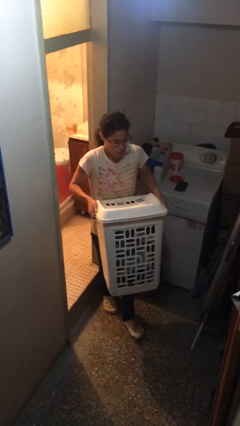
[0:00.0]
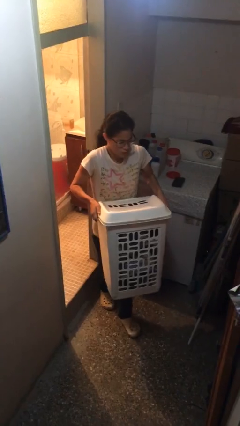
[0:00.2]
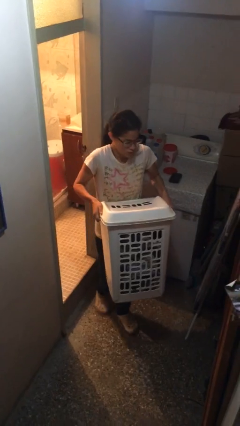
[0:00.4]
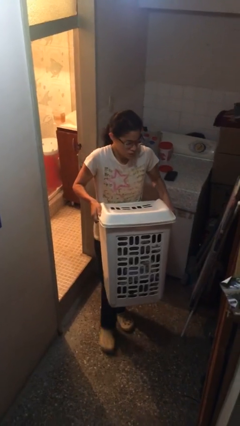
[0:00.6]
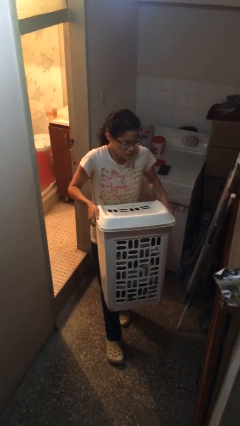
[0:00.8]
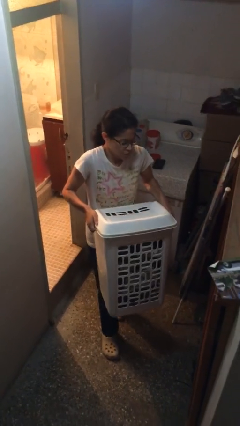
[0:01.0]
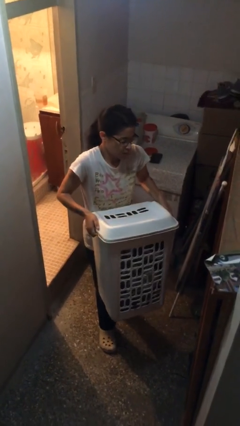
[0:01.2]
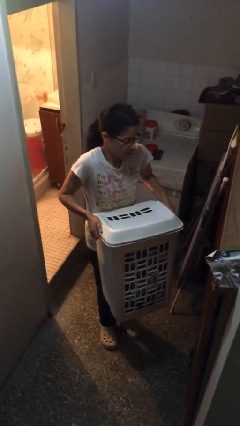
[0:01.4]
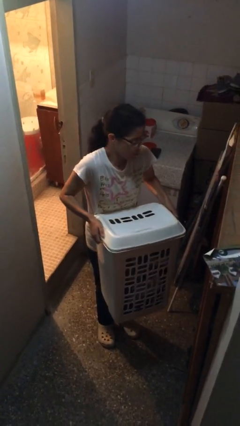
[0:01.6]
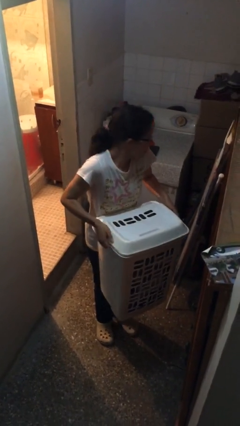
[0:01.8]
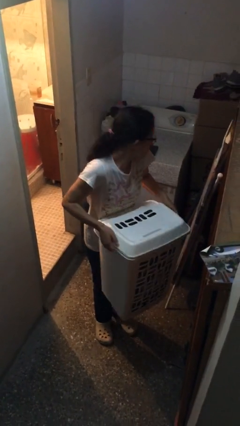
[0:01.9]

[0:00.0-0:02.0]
person carries heavy object

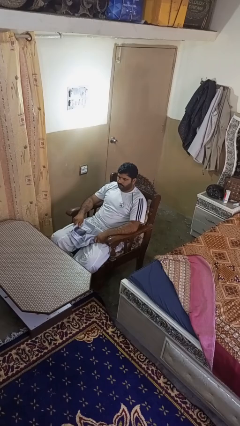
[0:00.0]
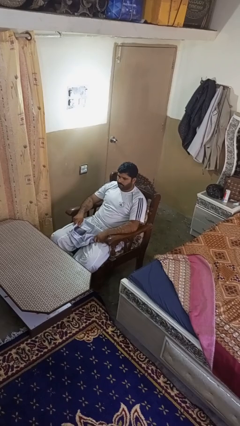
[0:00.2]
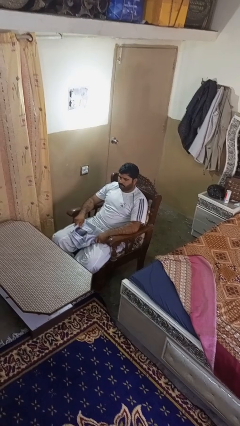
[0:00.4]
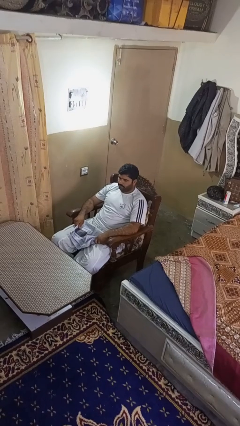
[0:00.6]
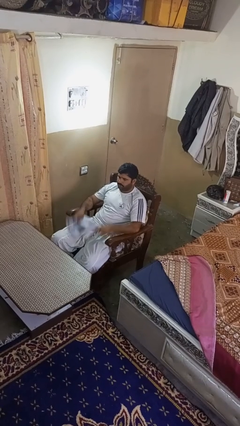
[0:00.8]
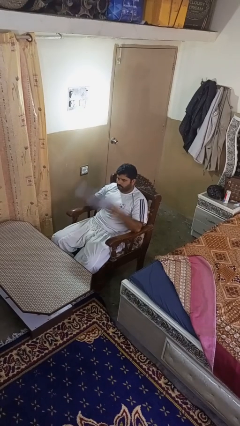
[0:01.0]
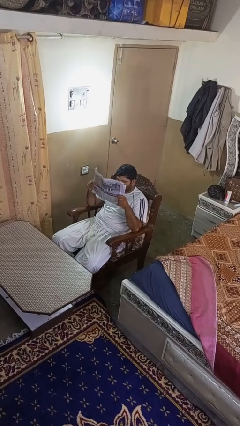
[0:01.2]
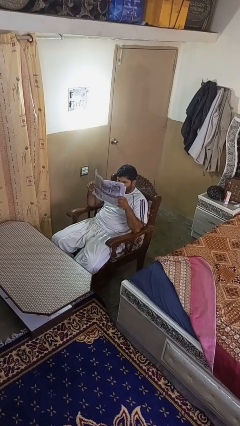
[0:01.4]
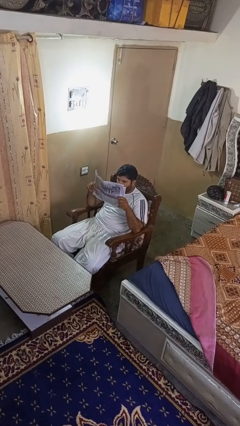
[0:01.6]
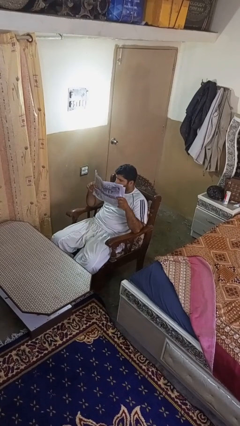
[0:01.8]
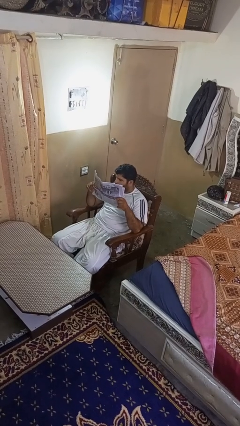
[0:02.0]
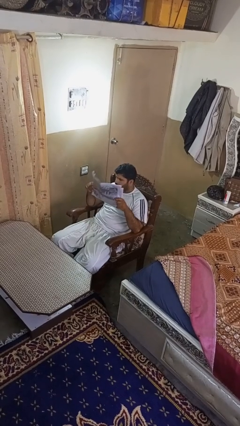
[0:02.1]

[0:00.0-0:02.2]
person reads newspaper

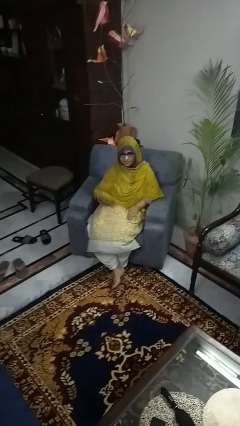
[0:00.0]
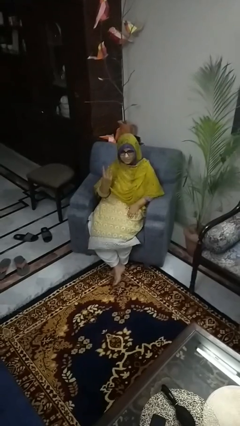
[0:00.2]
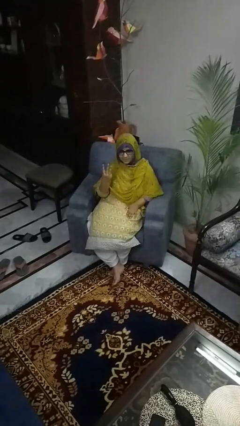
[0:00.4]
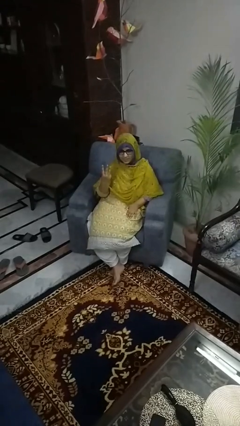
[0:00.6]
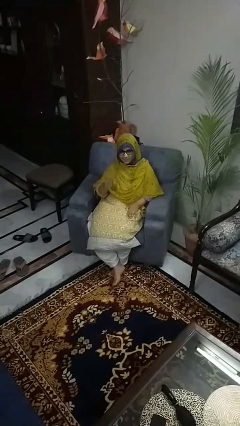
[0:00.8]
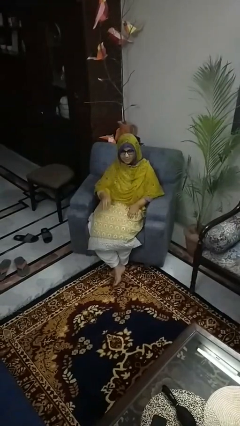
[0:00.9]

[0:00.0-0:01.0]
person gestures number three

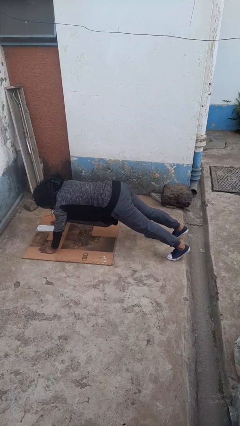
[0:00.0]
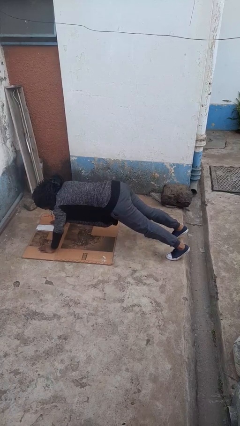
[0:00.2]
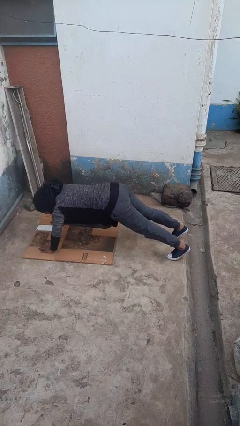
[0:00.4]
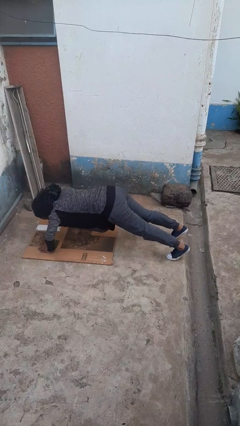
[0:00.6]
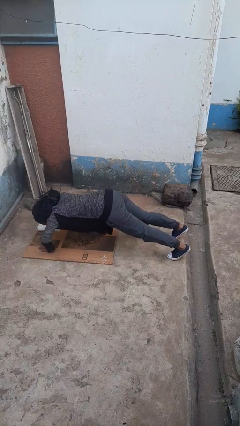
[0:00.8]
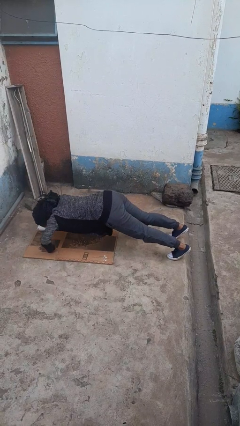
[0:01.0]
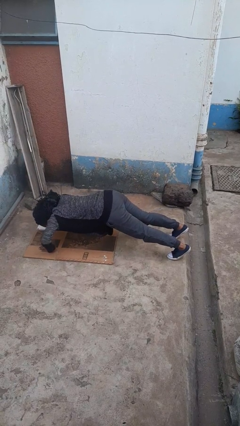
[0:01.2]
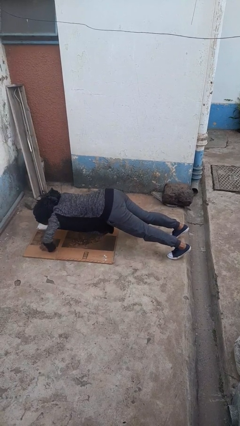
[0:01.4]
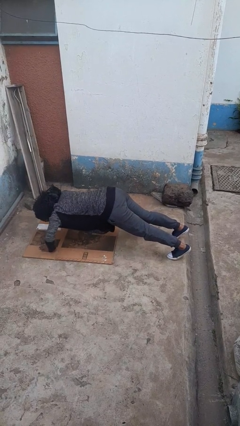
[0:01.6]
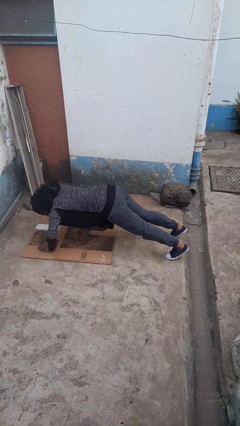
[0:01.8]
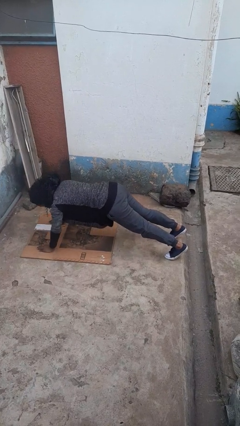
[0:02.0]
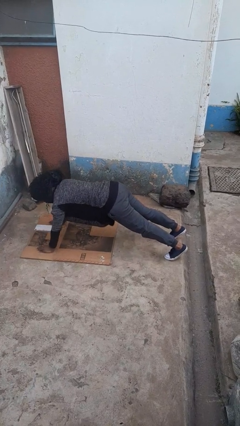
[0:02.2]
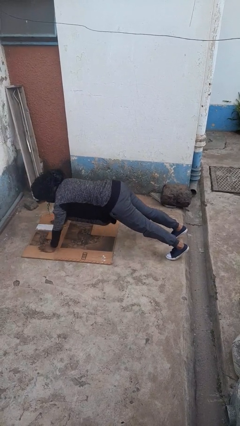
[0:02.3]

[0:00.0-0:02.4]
person exercises with pushup

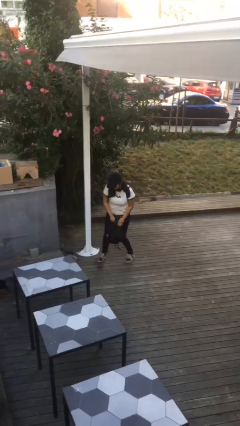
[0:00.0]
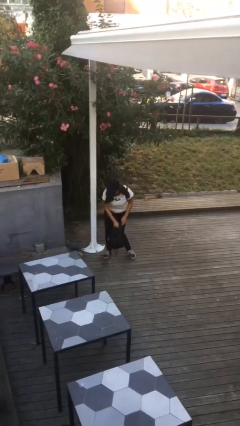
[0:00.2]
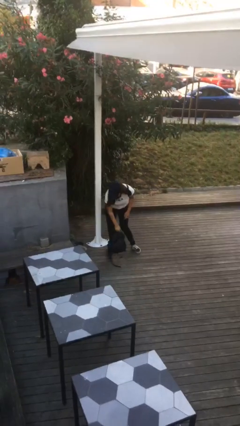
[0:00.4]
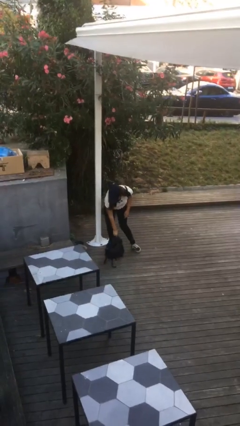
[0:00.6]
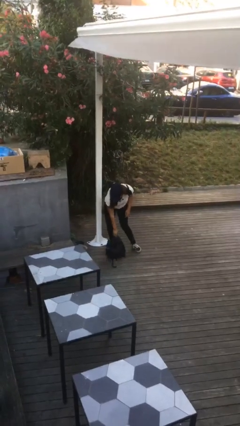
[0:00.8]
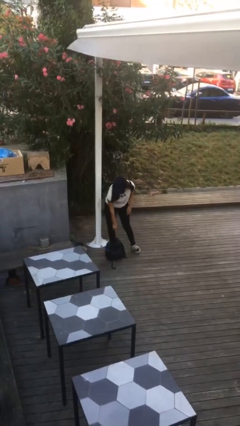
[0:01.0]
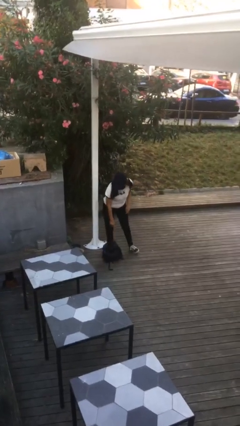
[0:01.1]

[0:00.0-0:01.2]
person puts down object on floor

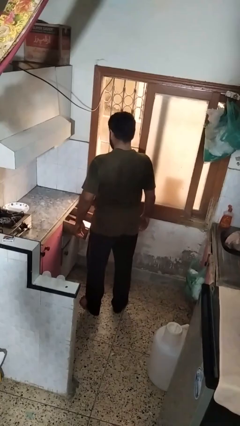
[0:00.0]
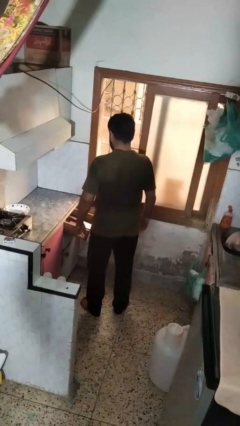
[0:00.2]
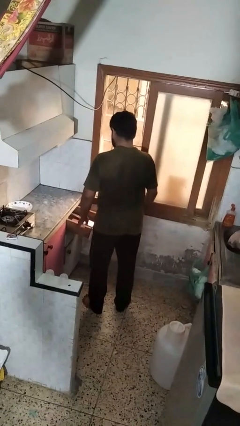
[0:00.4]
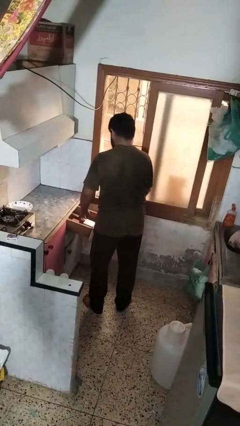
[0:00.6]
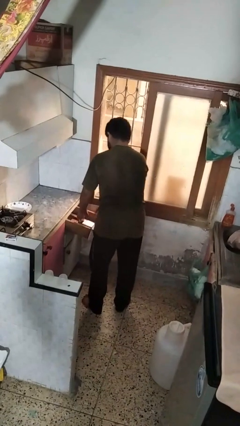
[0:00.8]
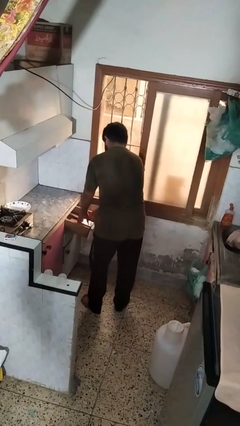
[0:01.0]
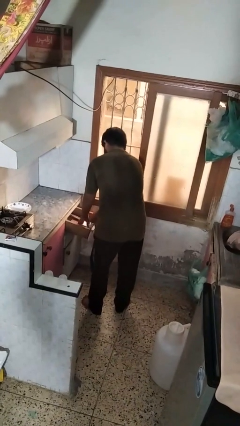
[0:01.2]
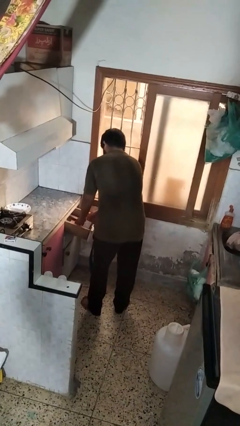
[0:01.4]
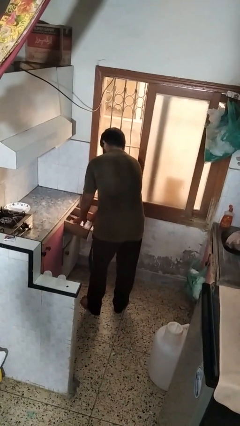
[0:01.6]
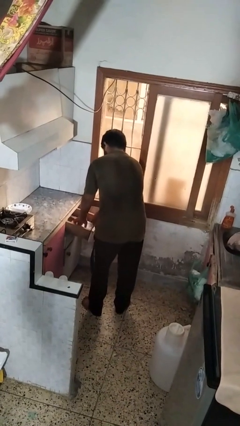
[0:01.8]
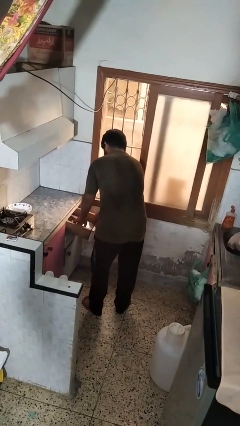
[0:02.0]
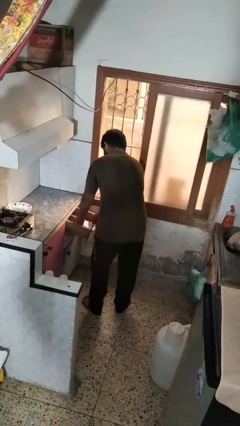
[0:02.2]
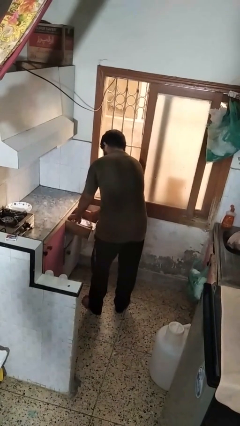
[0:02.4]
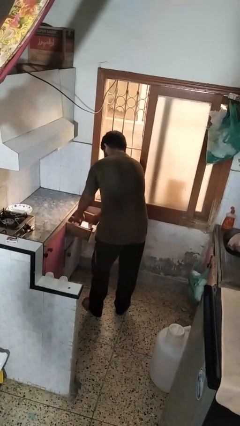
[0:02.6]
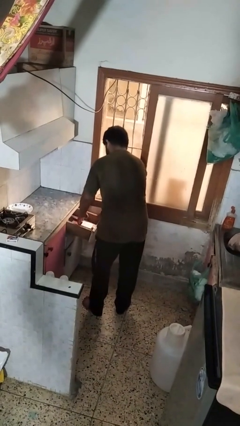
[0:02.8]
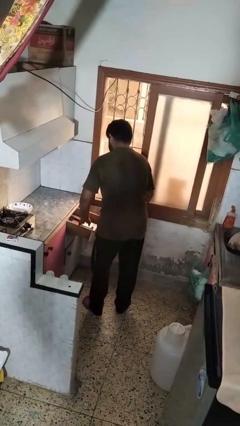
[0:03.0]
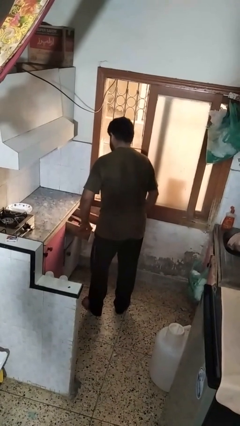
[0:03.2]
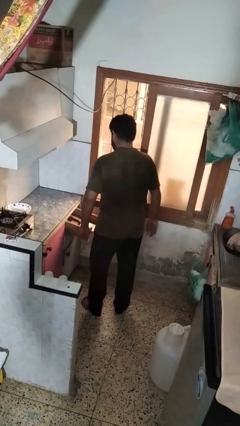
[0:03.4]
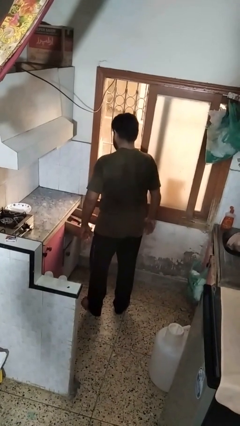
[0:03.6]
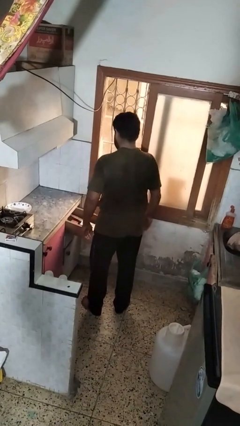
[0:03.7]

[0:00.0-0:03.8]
person searches in kitchen drawer

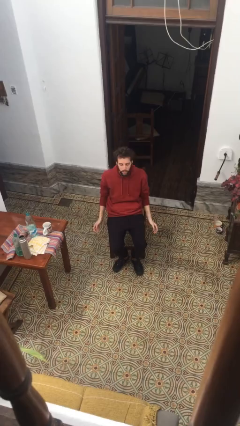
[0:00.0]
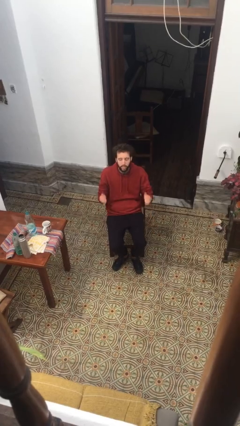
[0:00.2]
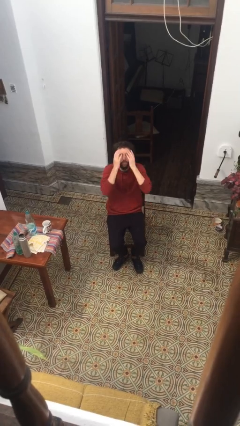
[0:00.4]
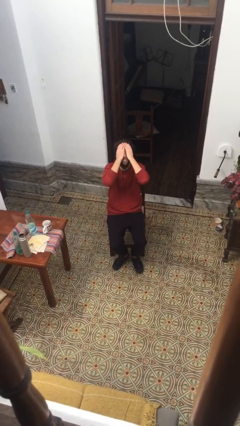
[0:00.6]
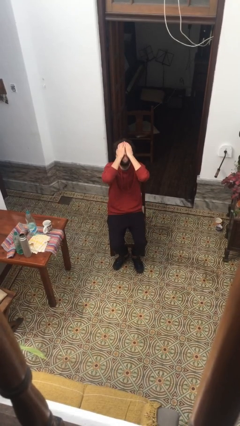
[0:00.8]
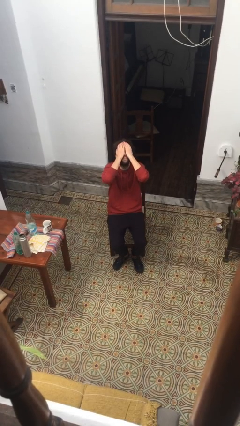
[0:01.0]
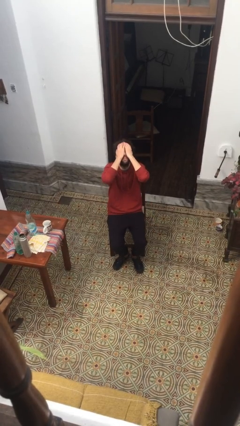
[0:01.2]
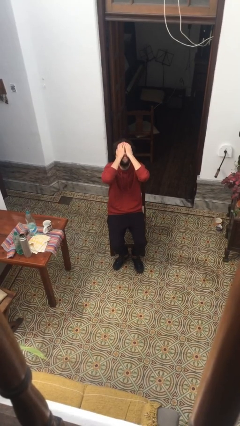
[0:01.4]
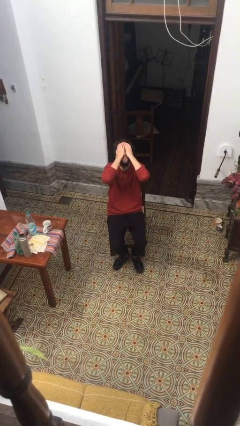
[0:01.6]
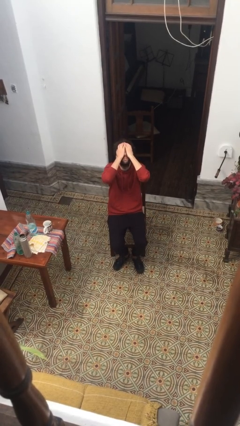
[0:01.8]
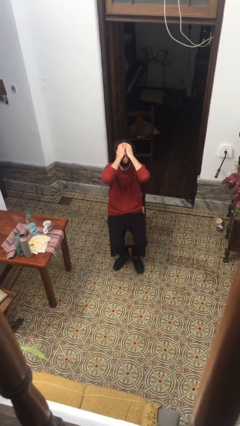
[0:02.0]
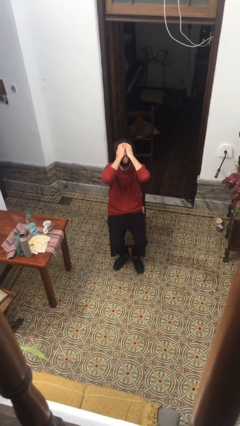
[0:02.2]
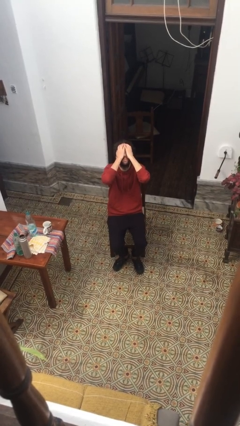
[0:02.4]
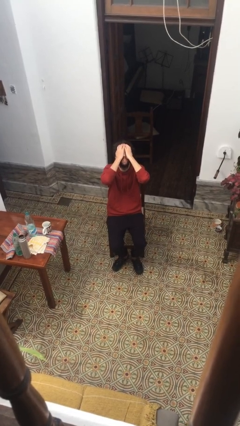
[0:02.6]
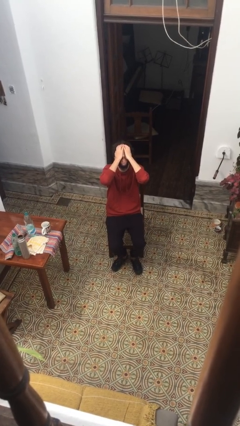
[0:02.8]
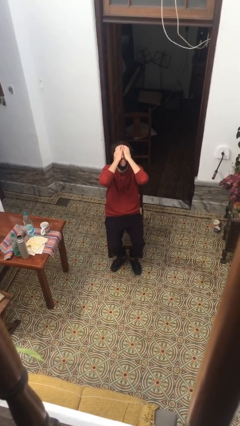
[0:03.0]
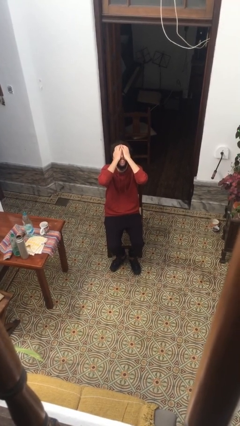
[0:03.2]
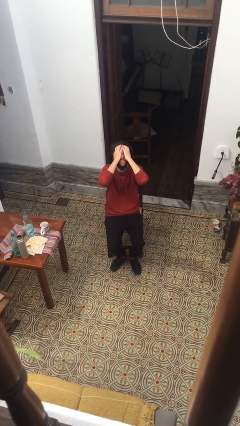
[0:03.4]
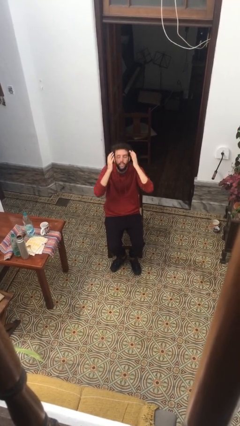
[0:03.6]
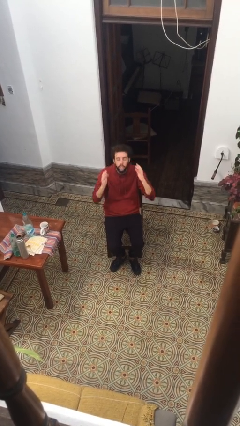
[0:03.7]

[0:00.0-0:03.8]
person covers face with hands

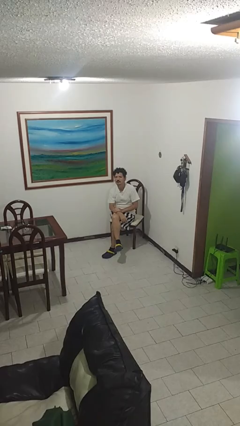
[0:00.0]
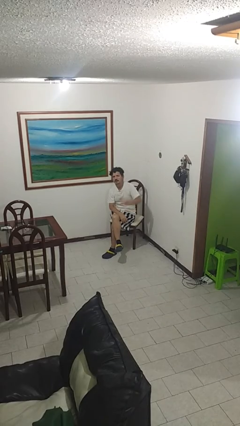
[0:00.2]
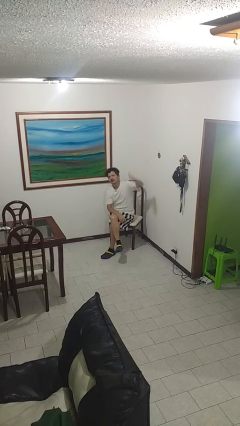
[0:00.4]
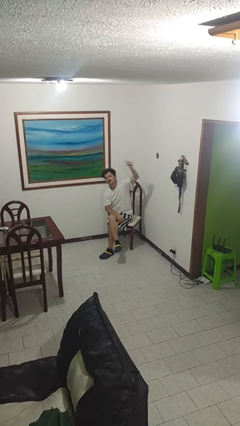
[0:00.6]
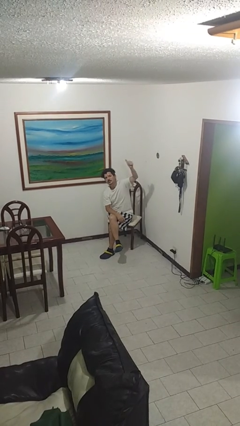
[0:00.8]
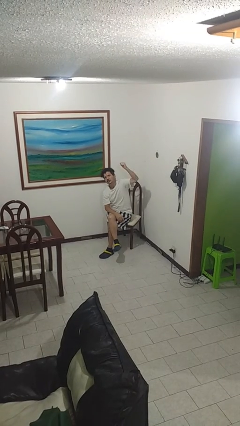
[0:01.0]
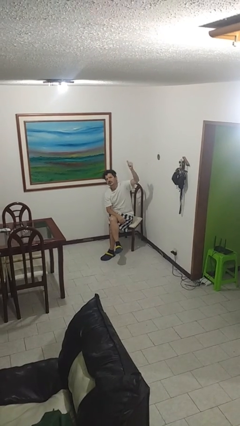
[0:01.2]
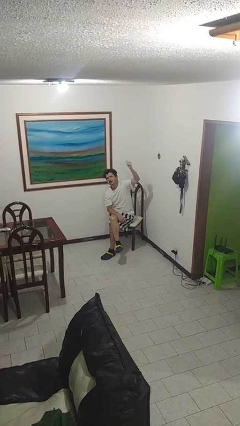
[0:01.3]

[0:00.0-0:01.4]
person gestures behind me
